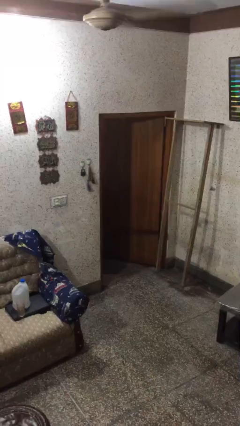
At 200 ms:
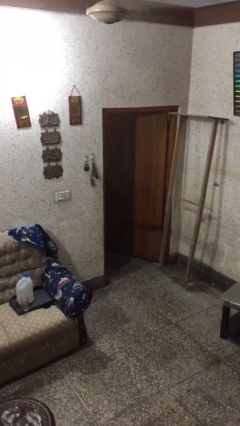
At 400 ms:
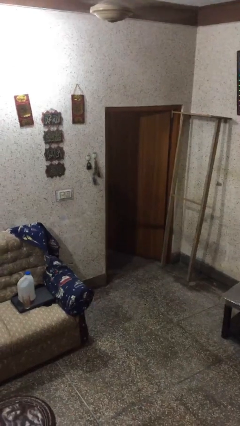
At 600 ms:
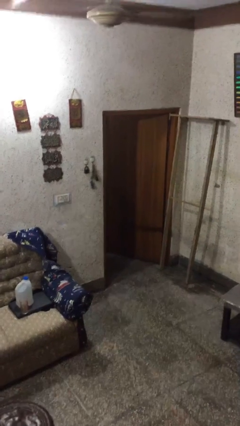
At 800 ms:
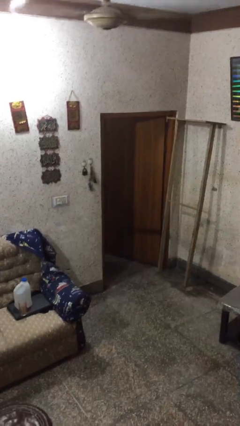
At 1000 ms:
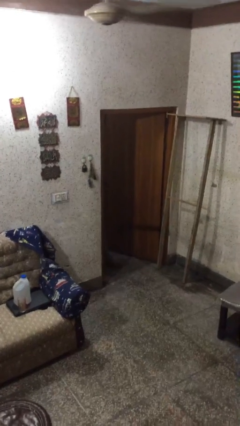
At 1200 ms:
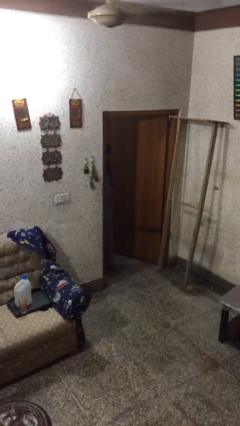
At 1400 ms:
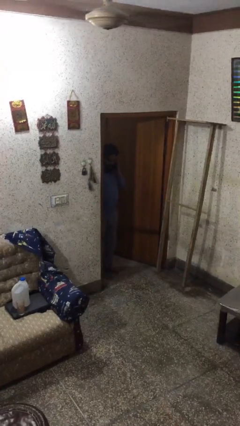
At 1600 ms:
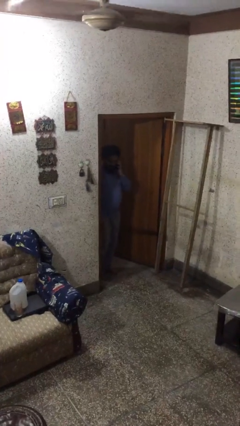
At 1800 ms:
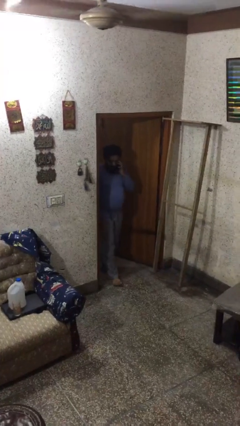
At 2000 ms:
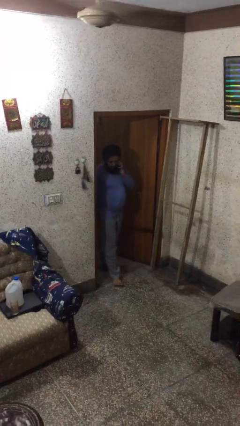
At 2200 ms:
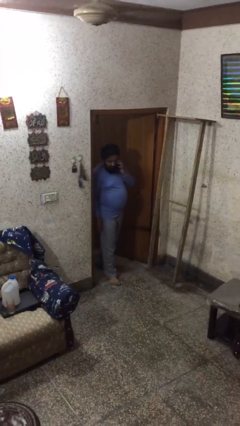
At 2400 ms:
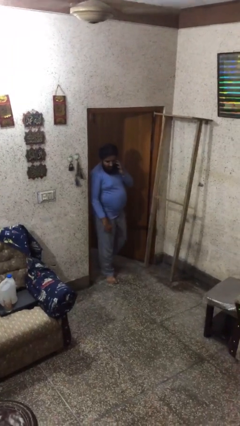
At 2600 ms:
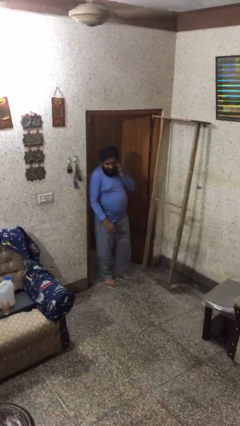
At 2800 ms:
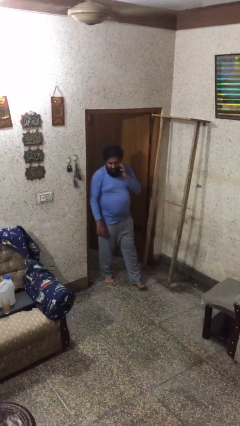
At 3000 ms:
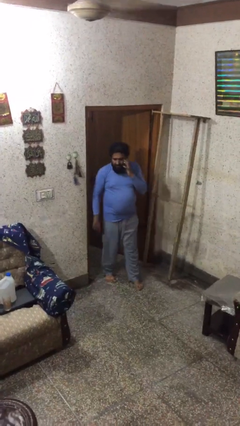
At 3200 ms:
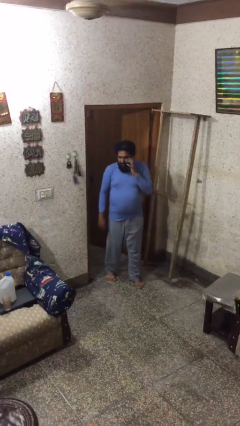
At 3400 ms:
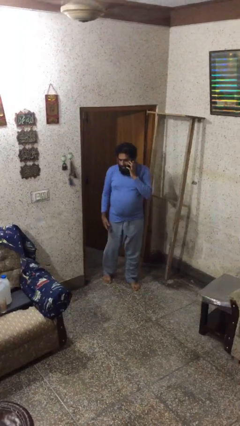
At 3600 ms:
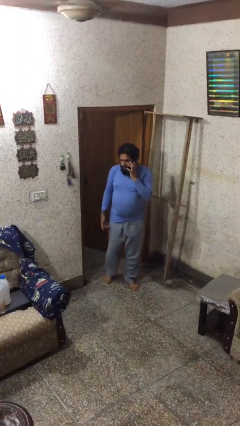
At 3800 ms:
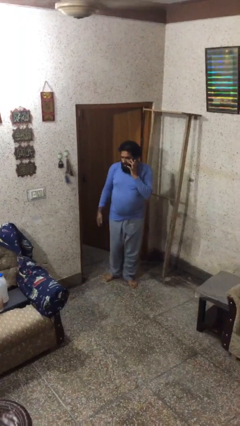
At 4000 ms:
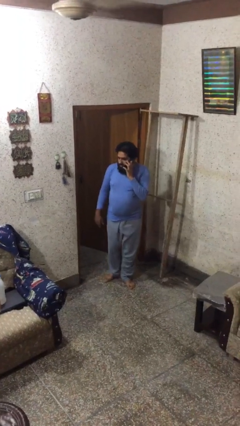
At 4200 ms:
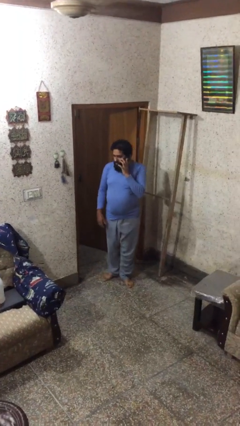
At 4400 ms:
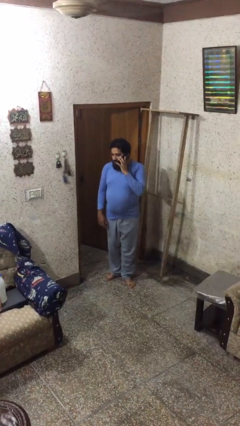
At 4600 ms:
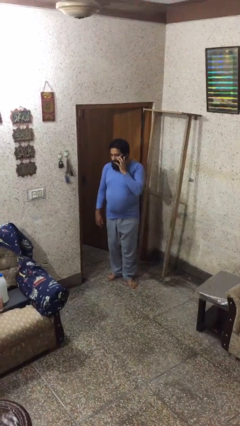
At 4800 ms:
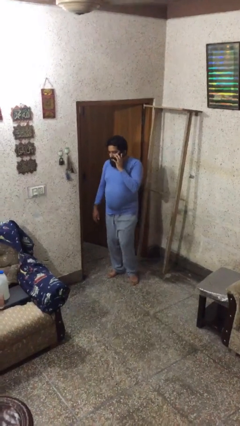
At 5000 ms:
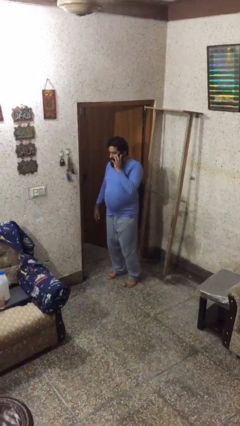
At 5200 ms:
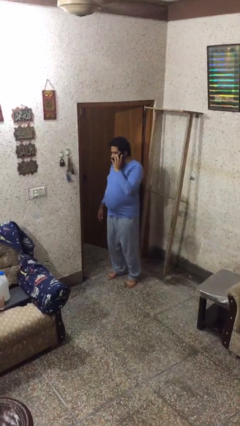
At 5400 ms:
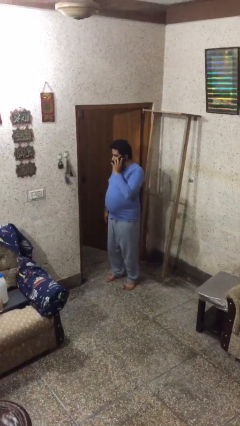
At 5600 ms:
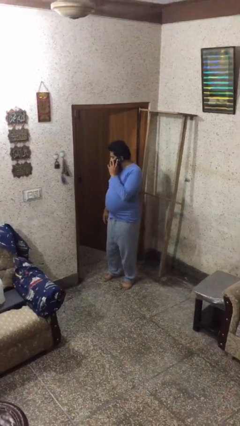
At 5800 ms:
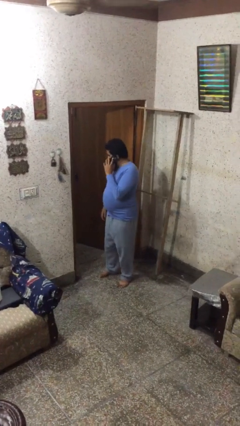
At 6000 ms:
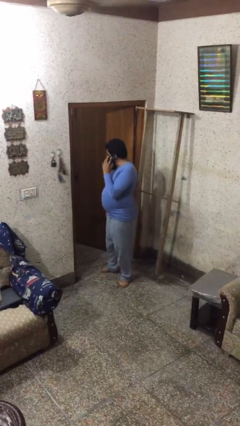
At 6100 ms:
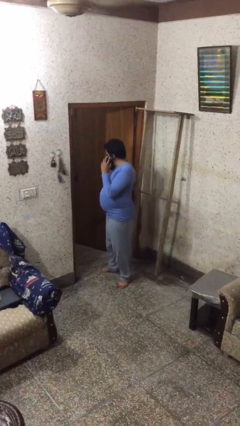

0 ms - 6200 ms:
person enters scene through structure

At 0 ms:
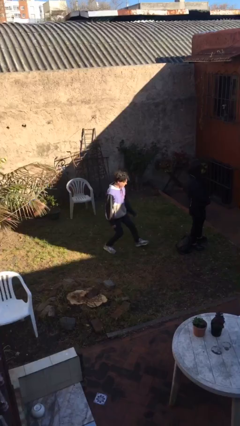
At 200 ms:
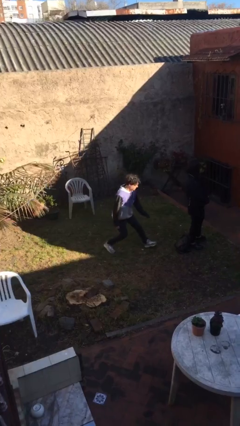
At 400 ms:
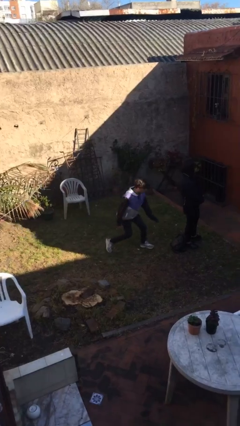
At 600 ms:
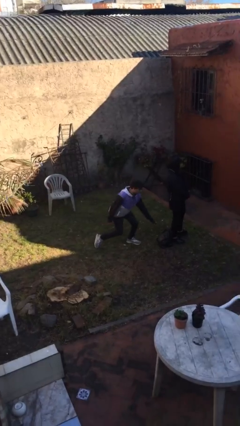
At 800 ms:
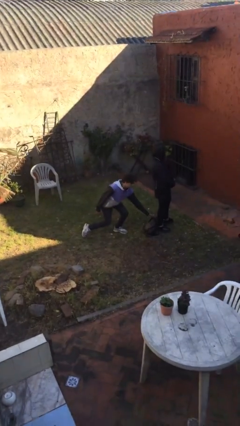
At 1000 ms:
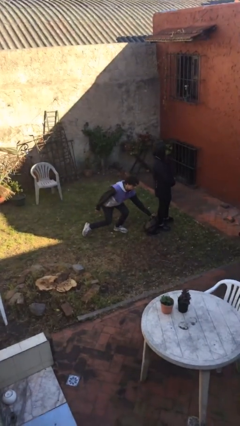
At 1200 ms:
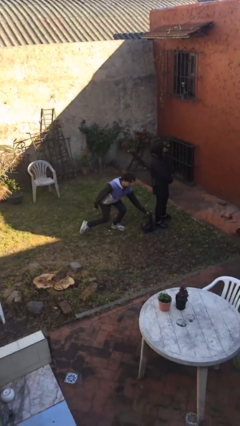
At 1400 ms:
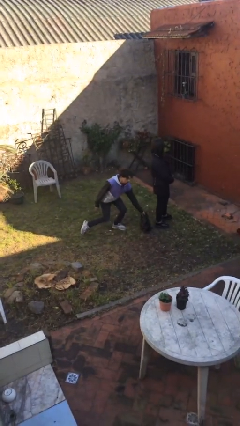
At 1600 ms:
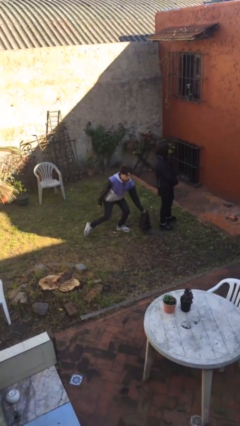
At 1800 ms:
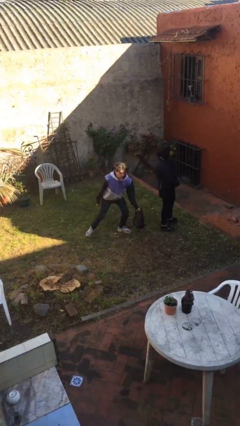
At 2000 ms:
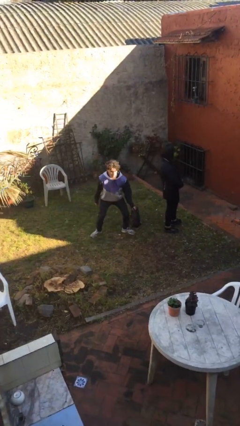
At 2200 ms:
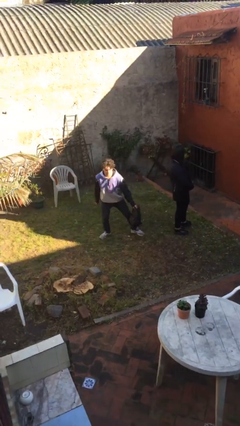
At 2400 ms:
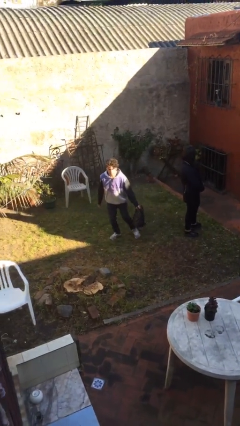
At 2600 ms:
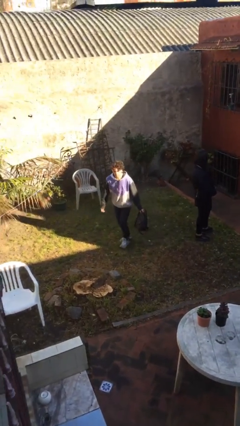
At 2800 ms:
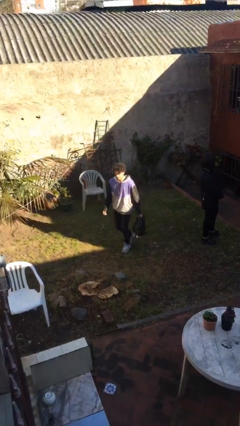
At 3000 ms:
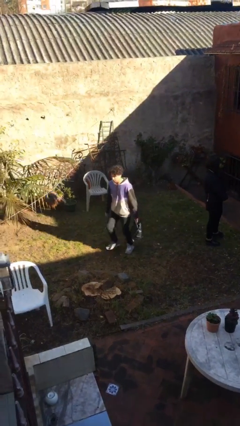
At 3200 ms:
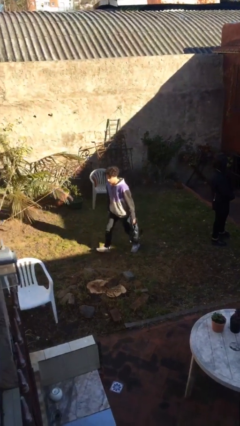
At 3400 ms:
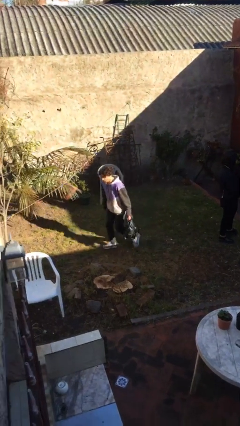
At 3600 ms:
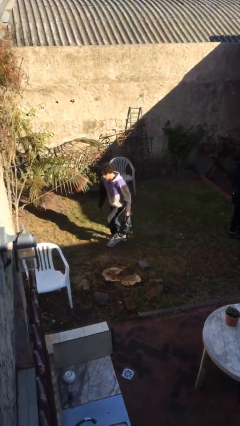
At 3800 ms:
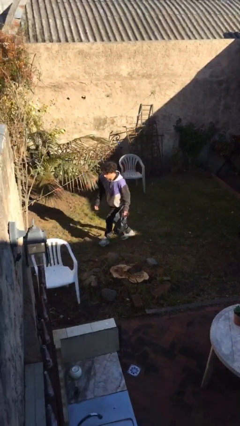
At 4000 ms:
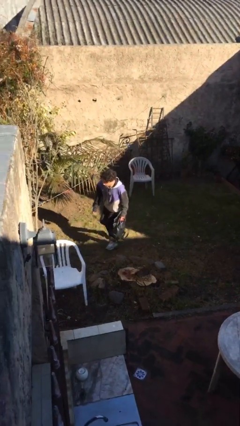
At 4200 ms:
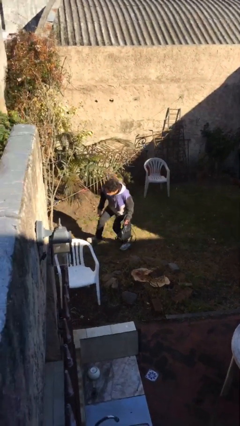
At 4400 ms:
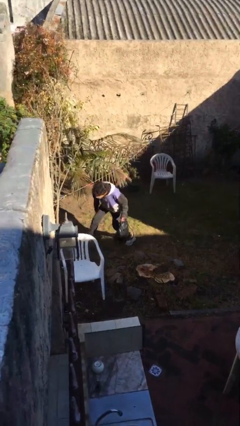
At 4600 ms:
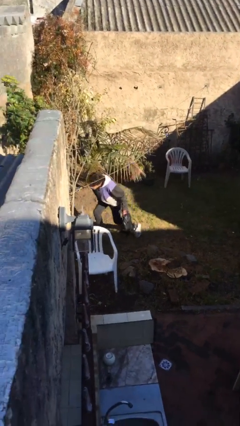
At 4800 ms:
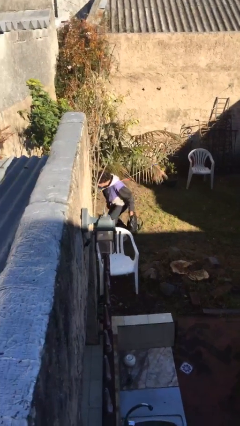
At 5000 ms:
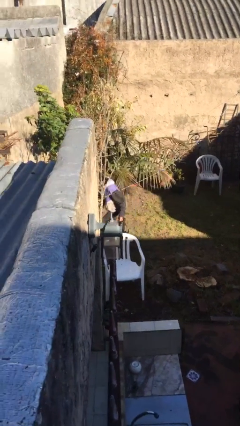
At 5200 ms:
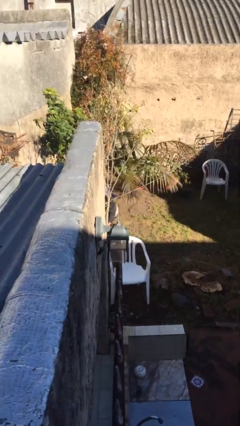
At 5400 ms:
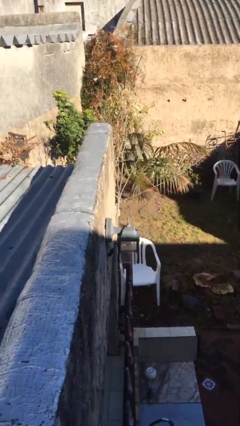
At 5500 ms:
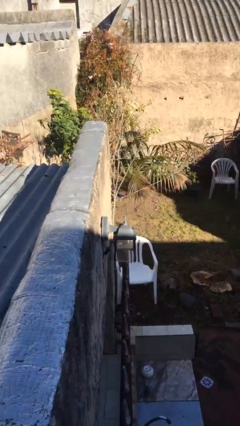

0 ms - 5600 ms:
person steals object from person

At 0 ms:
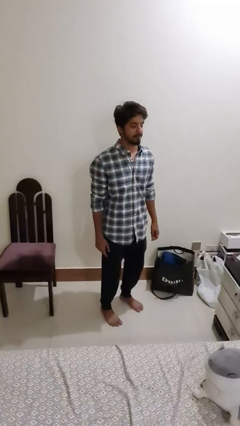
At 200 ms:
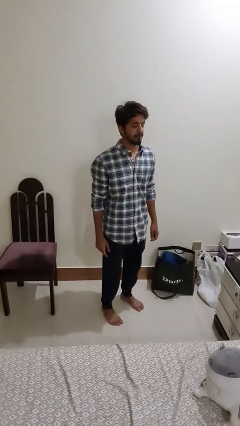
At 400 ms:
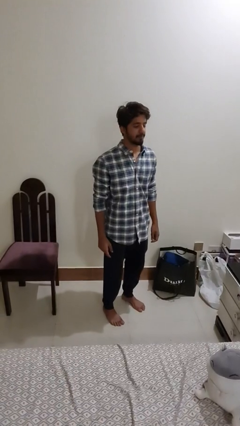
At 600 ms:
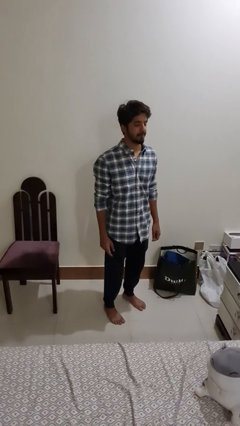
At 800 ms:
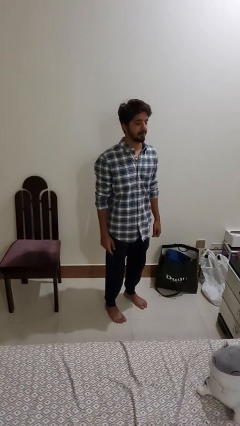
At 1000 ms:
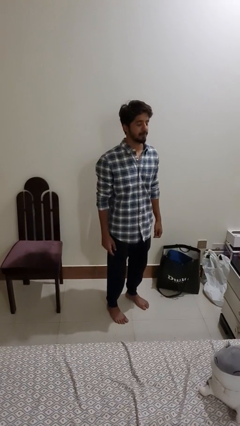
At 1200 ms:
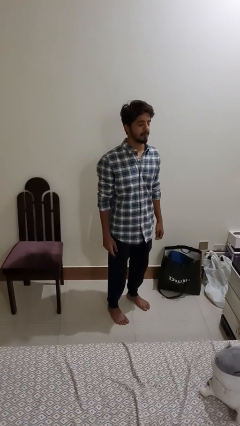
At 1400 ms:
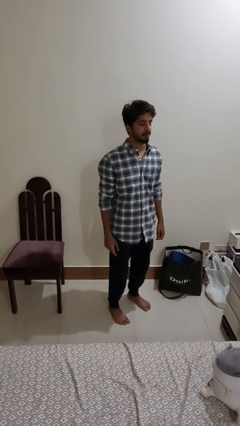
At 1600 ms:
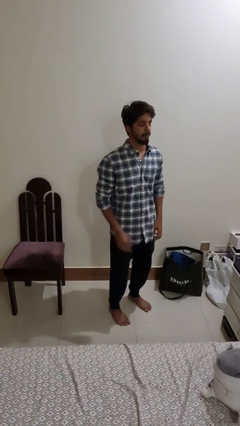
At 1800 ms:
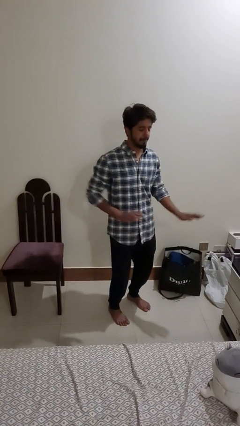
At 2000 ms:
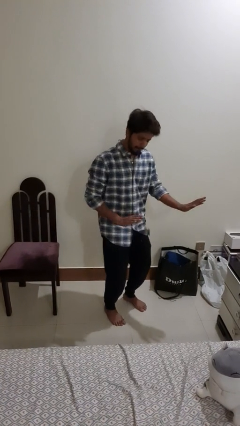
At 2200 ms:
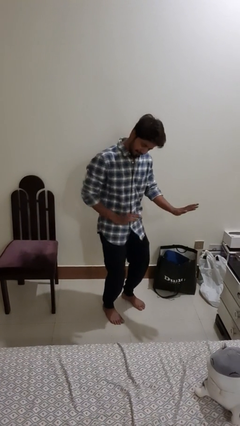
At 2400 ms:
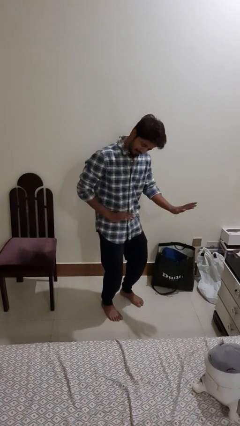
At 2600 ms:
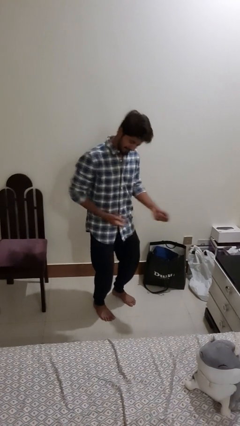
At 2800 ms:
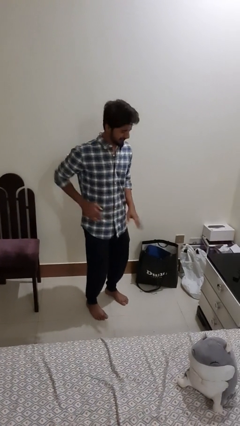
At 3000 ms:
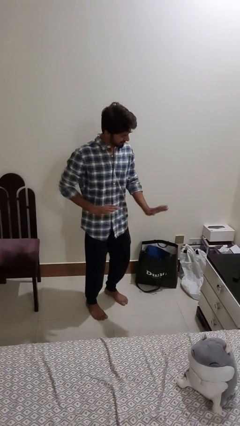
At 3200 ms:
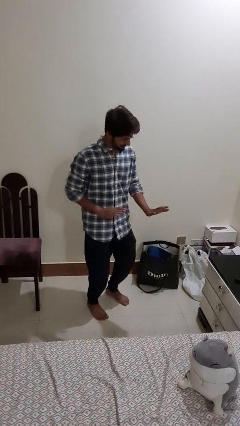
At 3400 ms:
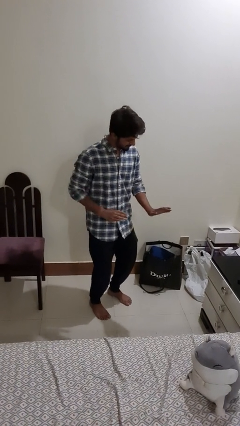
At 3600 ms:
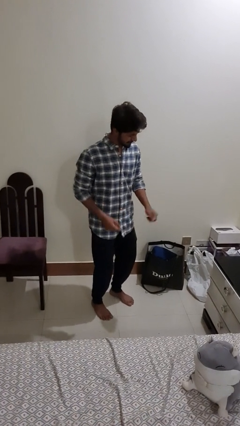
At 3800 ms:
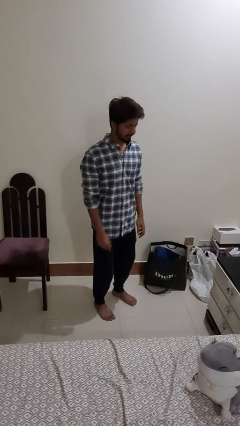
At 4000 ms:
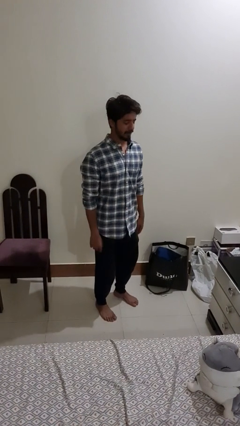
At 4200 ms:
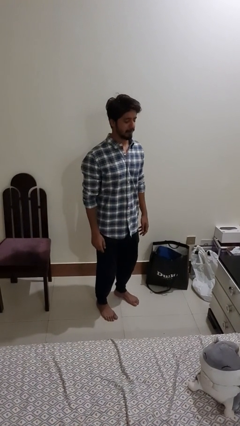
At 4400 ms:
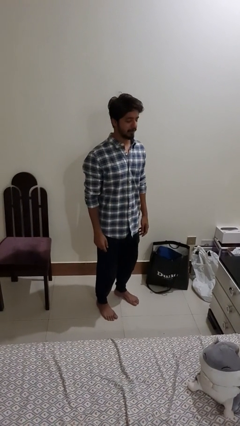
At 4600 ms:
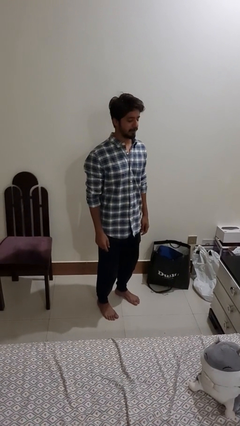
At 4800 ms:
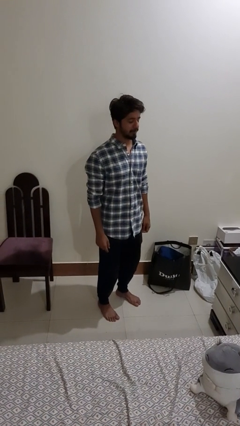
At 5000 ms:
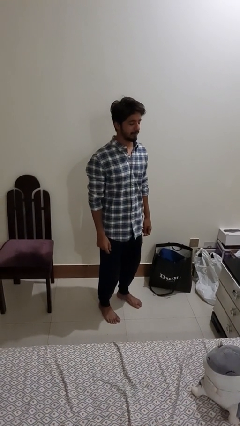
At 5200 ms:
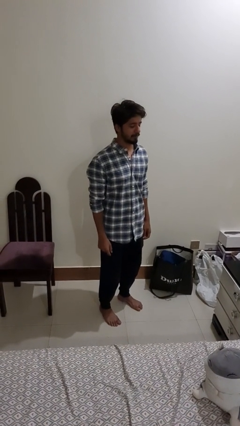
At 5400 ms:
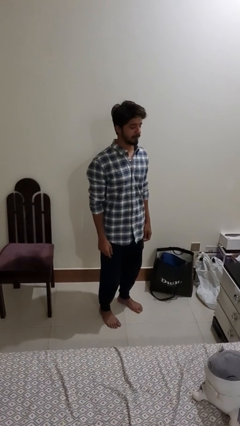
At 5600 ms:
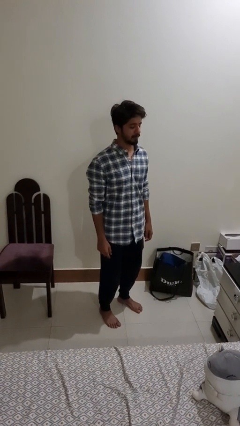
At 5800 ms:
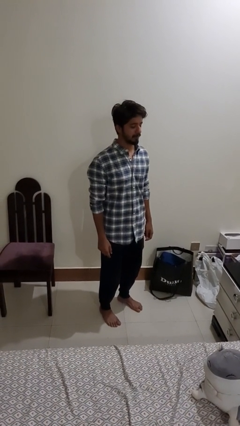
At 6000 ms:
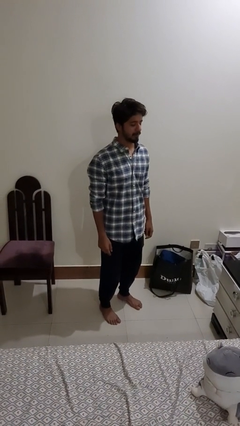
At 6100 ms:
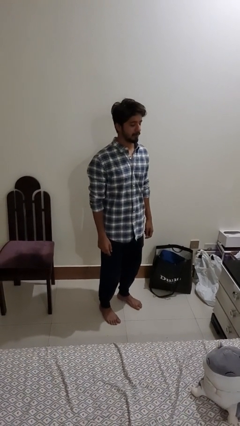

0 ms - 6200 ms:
person dances in place
